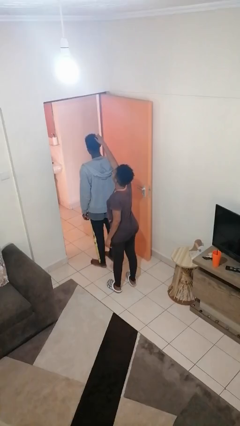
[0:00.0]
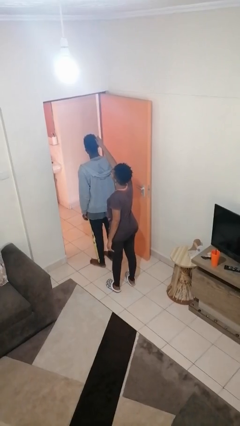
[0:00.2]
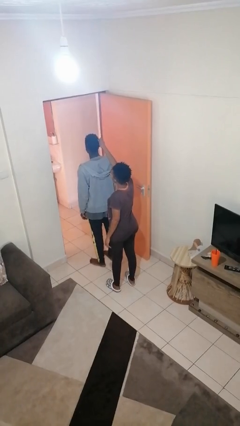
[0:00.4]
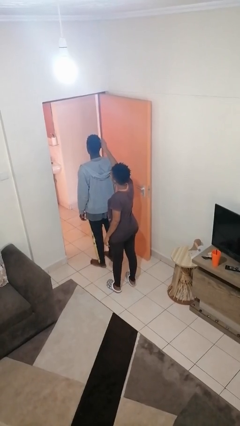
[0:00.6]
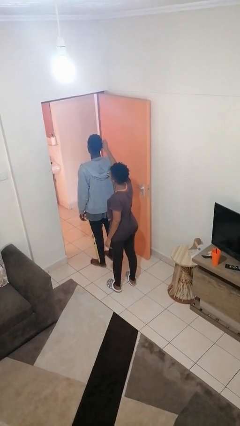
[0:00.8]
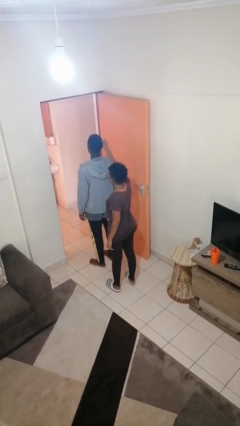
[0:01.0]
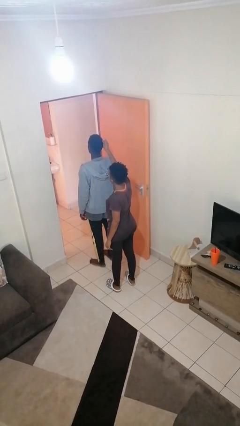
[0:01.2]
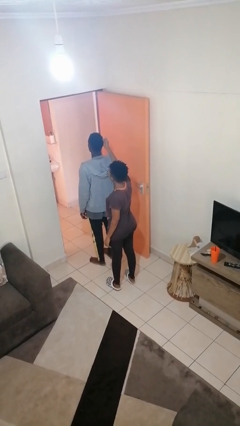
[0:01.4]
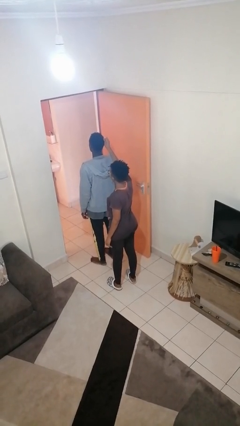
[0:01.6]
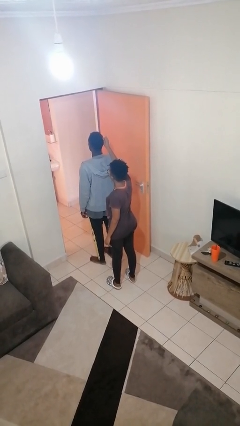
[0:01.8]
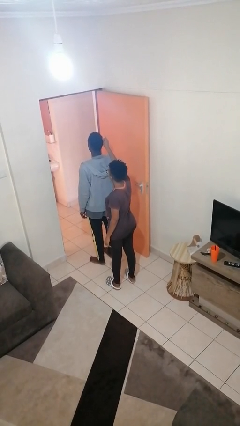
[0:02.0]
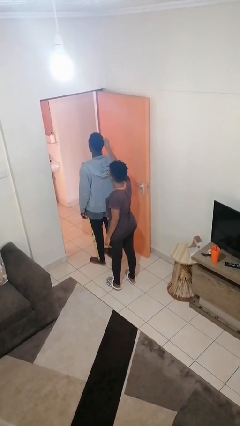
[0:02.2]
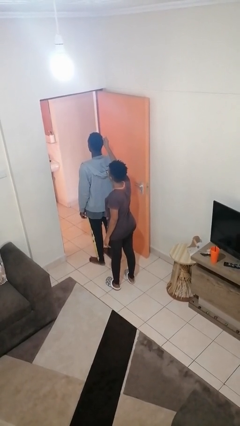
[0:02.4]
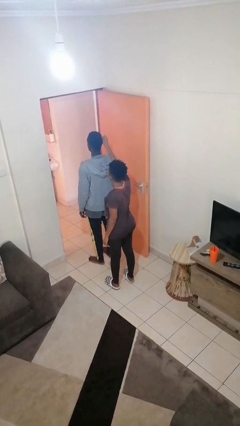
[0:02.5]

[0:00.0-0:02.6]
person grabs person by hair

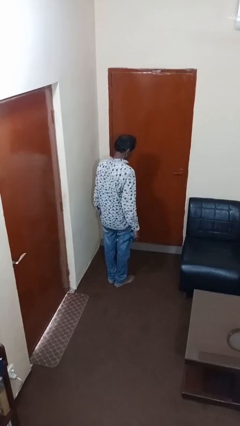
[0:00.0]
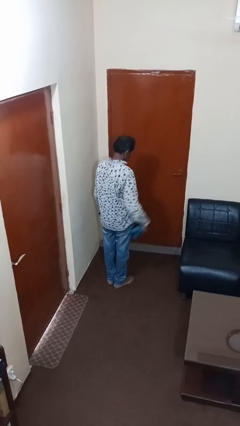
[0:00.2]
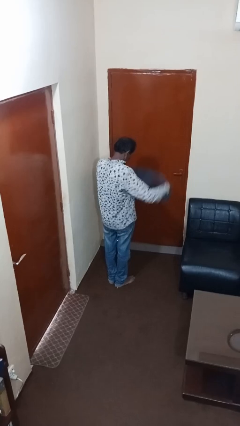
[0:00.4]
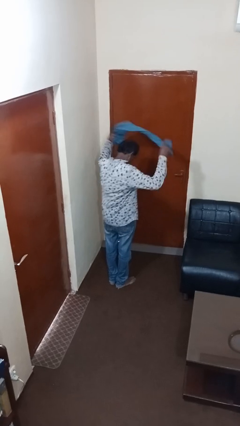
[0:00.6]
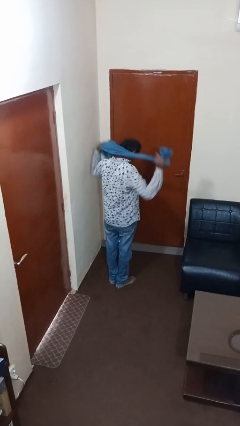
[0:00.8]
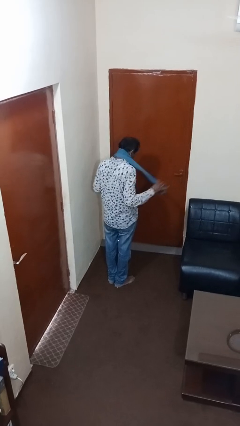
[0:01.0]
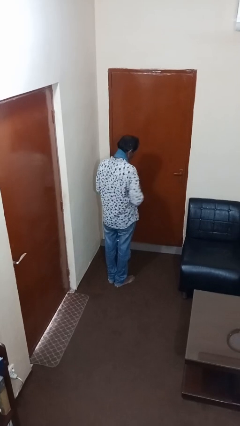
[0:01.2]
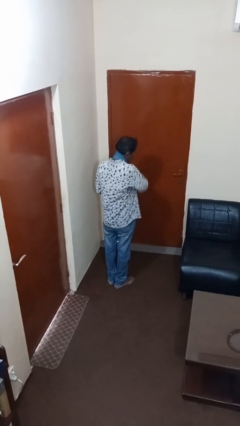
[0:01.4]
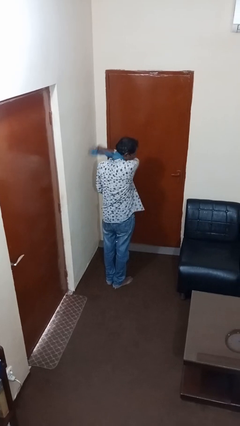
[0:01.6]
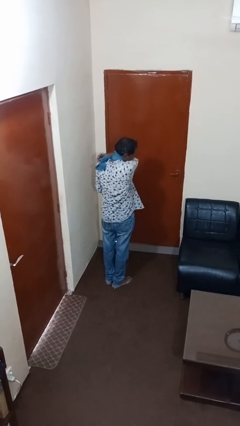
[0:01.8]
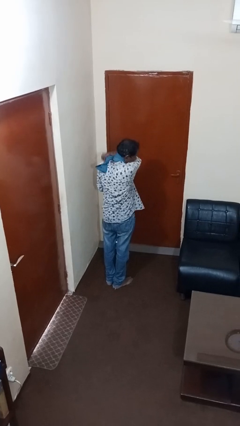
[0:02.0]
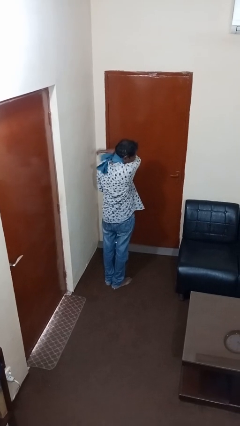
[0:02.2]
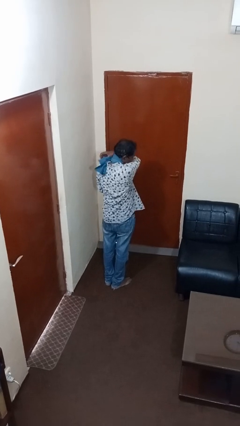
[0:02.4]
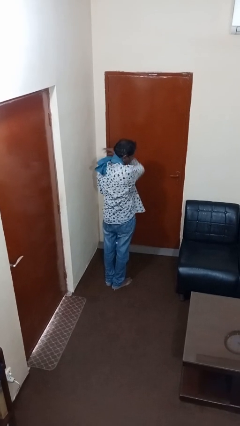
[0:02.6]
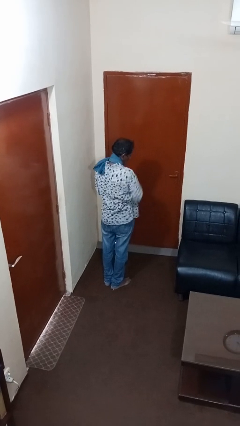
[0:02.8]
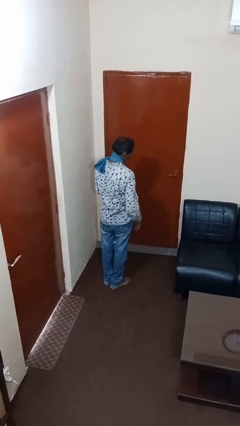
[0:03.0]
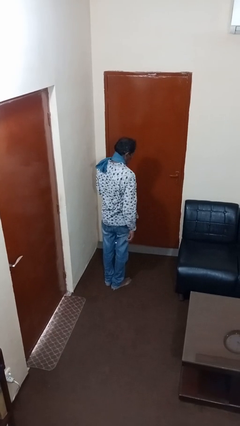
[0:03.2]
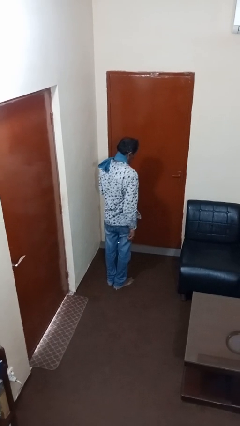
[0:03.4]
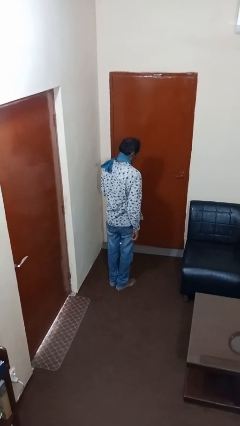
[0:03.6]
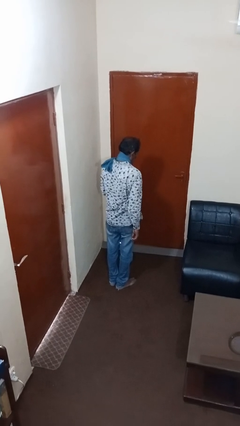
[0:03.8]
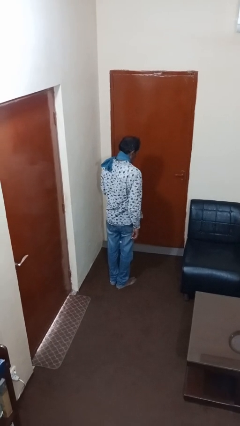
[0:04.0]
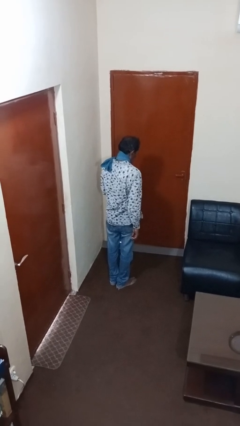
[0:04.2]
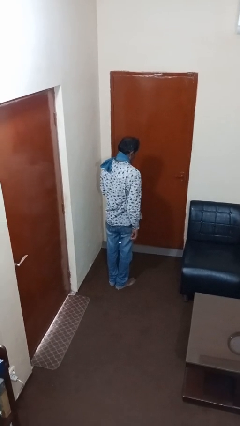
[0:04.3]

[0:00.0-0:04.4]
person puts on scarf

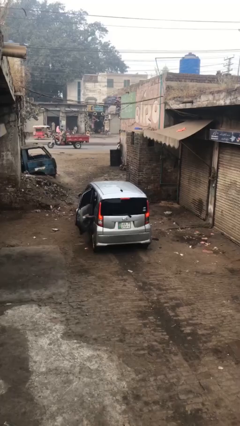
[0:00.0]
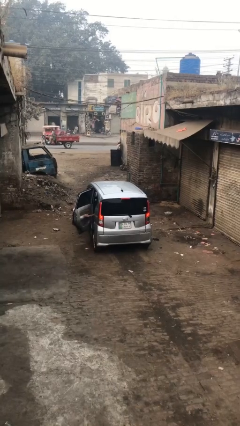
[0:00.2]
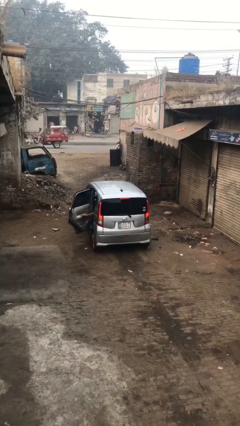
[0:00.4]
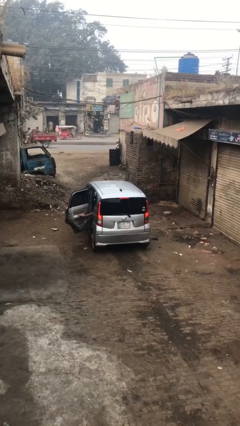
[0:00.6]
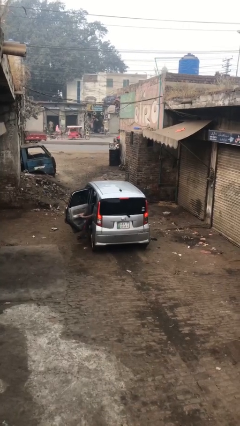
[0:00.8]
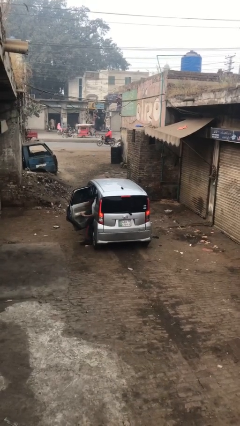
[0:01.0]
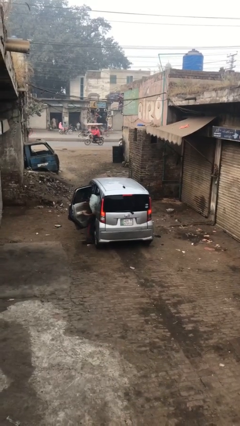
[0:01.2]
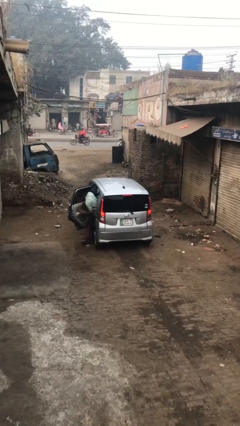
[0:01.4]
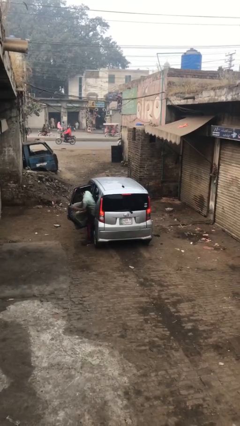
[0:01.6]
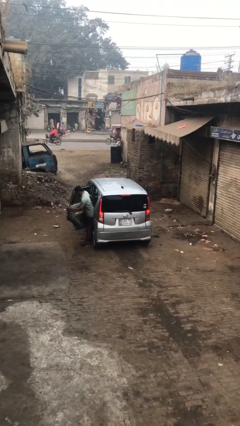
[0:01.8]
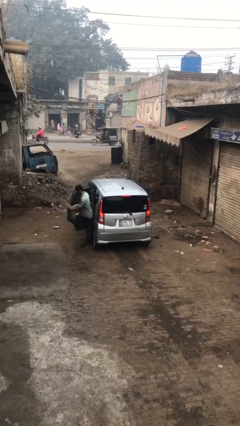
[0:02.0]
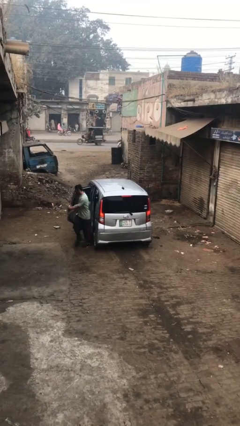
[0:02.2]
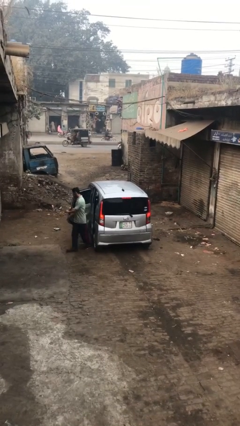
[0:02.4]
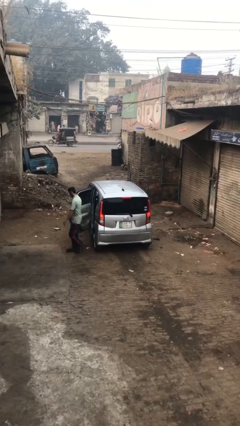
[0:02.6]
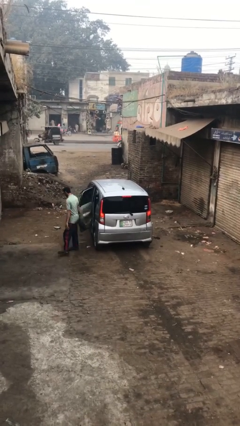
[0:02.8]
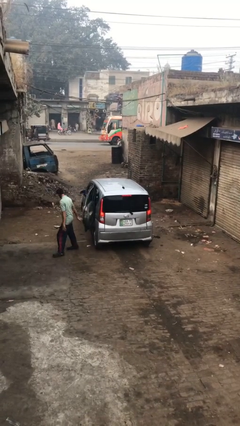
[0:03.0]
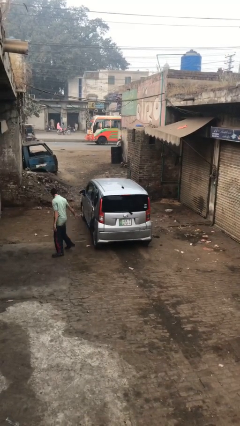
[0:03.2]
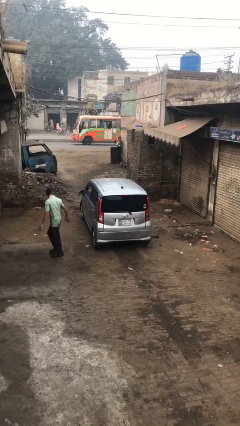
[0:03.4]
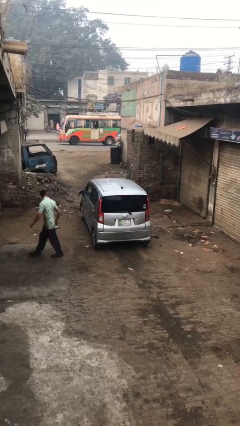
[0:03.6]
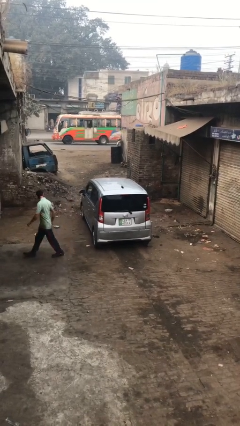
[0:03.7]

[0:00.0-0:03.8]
car drops off person

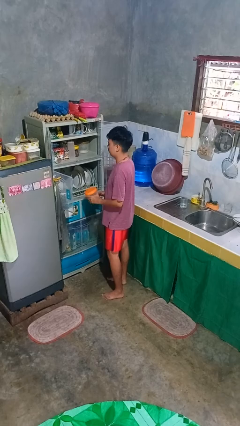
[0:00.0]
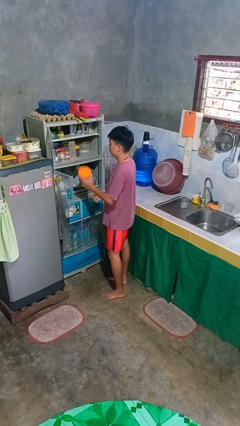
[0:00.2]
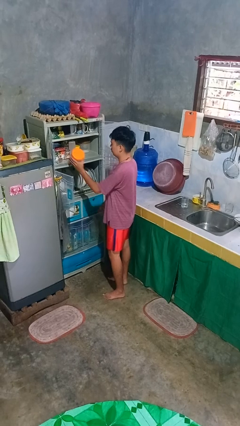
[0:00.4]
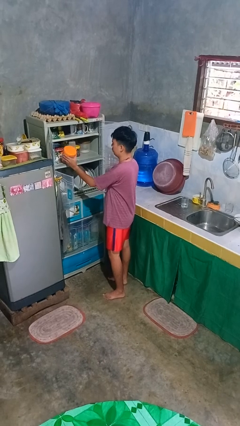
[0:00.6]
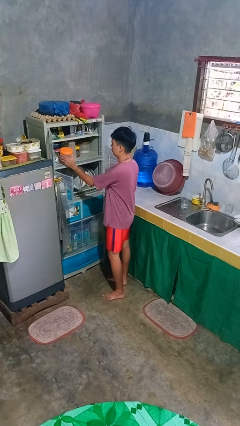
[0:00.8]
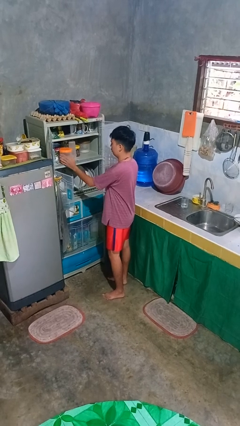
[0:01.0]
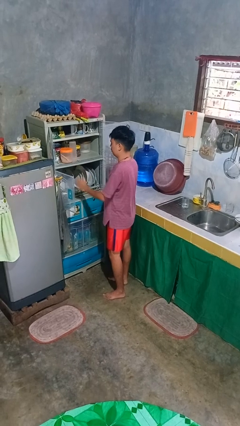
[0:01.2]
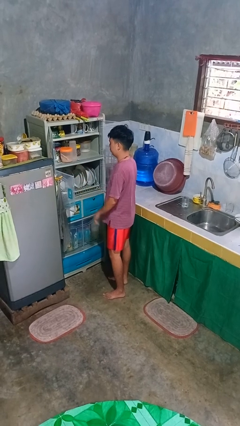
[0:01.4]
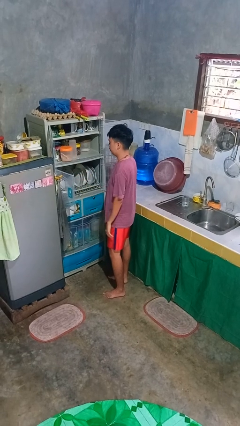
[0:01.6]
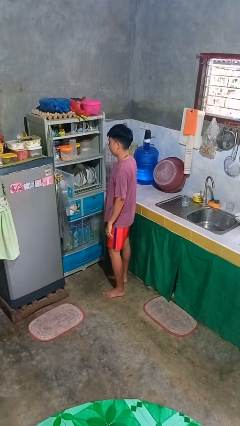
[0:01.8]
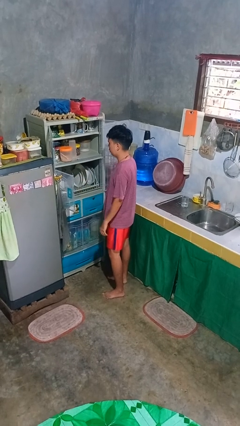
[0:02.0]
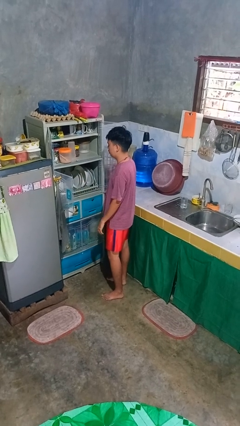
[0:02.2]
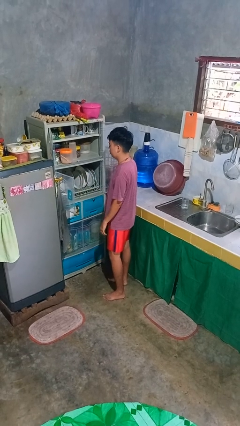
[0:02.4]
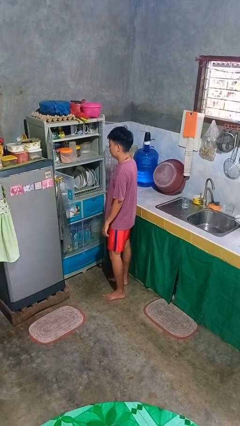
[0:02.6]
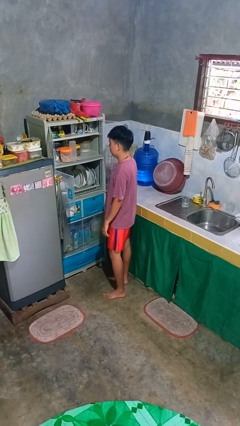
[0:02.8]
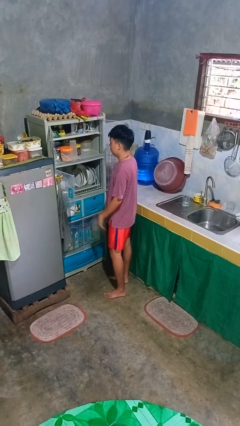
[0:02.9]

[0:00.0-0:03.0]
person puts object in cabinet

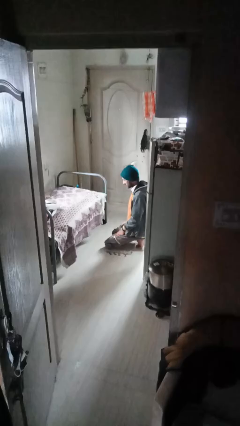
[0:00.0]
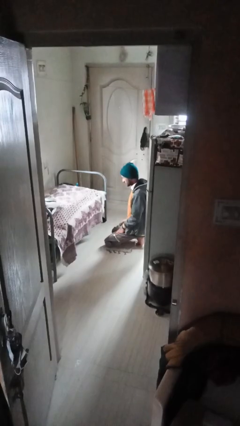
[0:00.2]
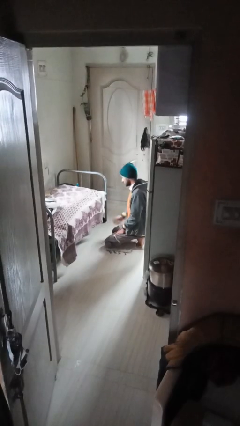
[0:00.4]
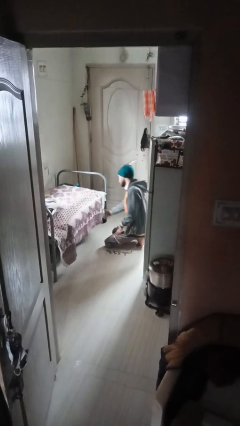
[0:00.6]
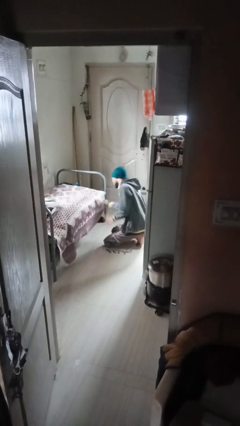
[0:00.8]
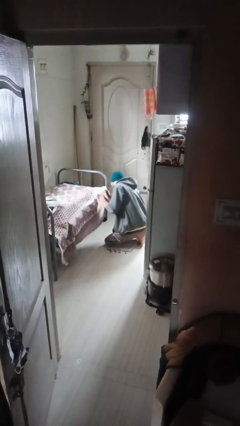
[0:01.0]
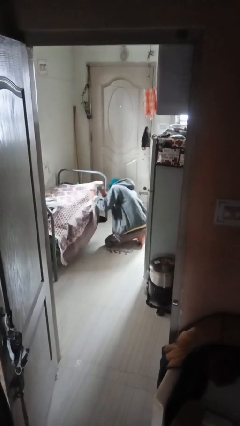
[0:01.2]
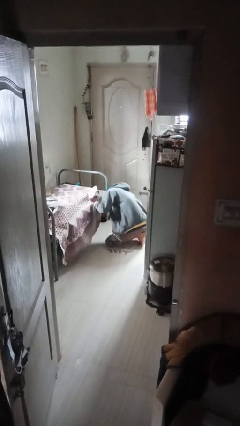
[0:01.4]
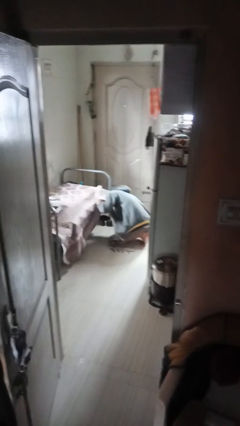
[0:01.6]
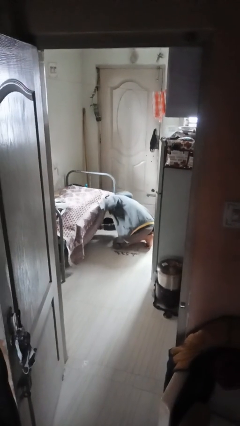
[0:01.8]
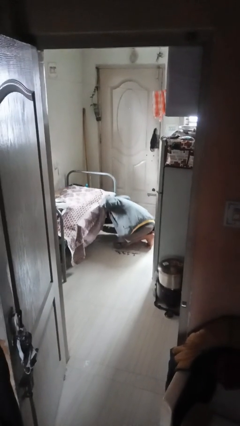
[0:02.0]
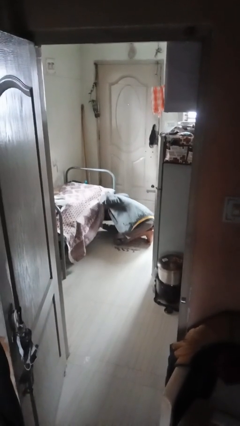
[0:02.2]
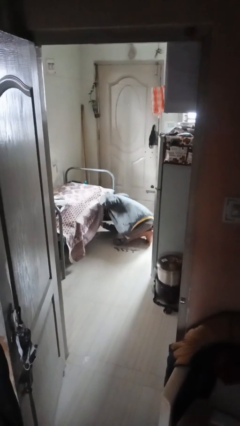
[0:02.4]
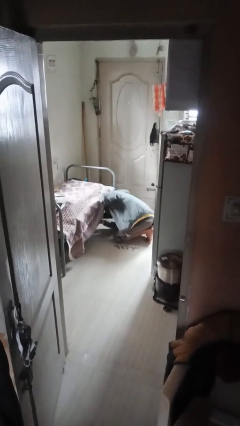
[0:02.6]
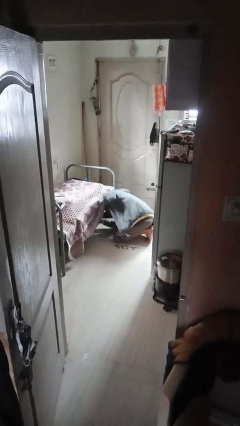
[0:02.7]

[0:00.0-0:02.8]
person searches under bed

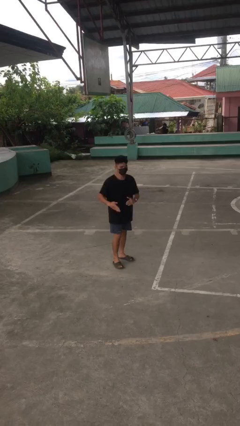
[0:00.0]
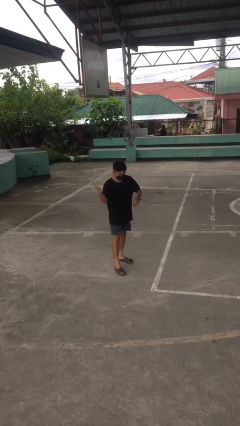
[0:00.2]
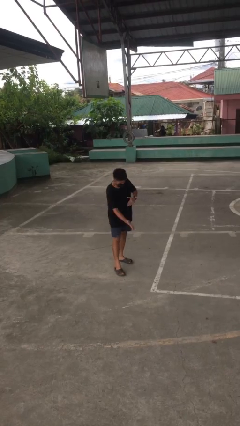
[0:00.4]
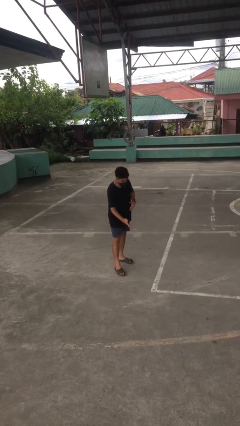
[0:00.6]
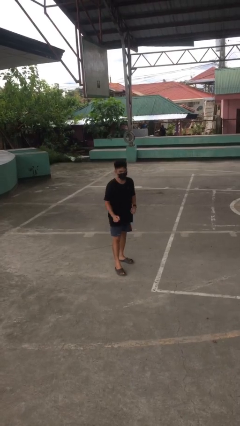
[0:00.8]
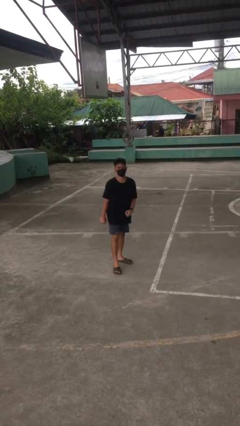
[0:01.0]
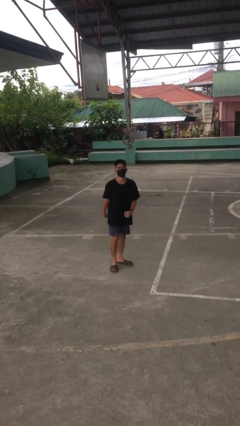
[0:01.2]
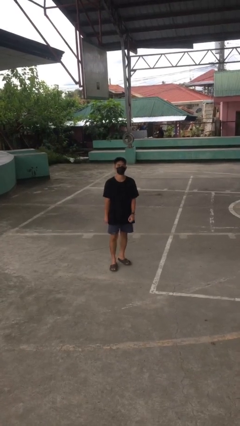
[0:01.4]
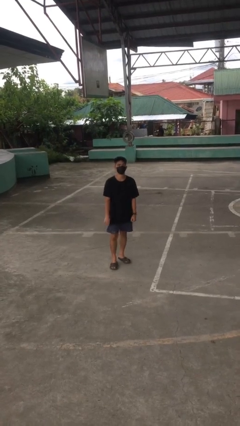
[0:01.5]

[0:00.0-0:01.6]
person karate chop
